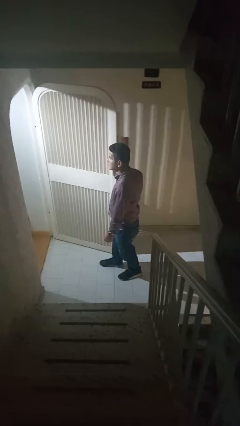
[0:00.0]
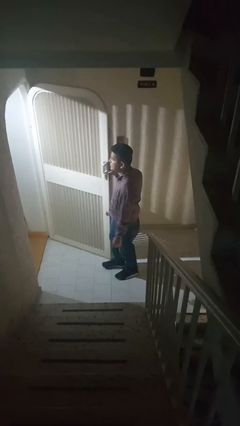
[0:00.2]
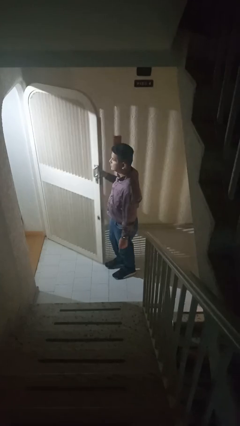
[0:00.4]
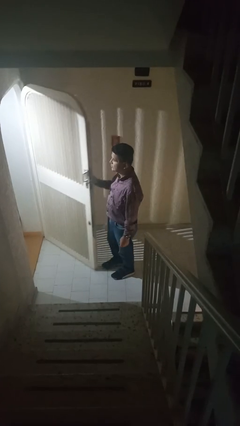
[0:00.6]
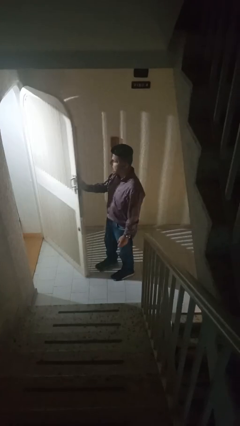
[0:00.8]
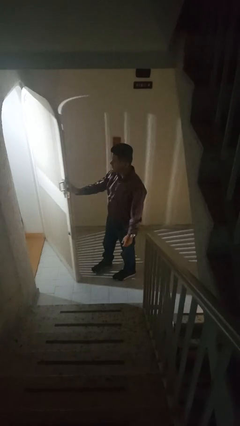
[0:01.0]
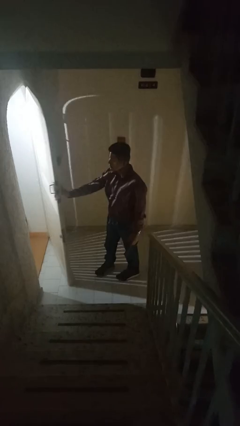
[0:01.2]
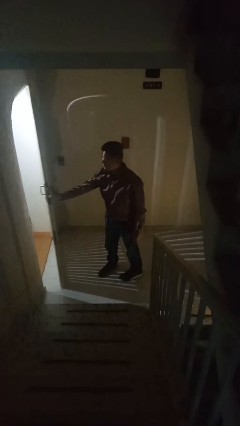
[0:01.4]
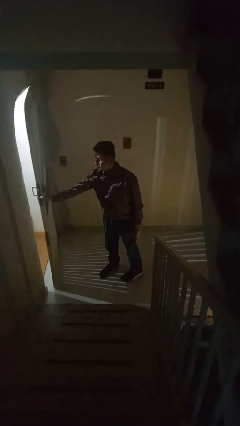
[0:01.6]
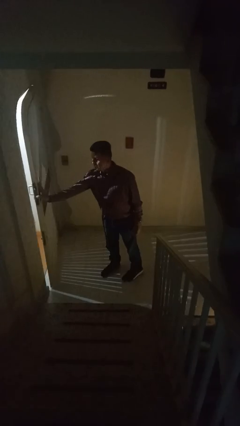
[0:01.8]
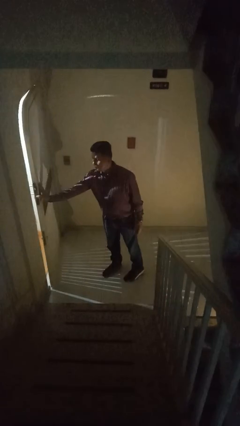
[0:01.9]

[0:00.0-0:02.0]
person closes facility door

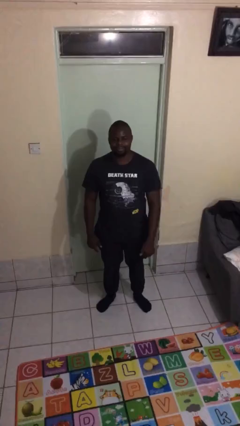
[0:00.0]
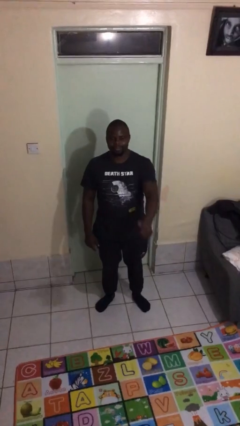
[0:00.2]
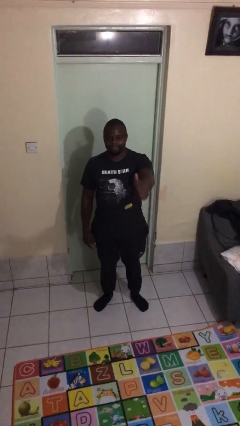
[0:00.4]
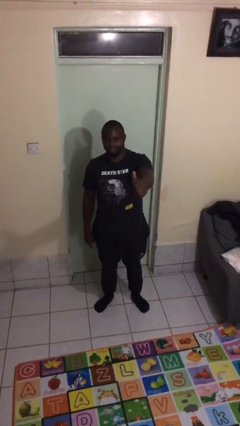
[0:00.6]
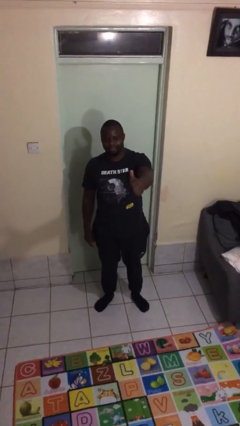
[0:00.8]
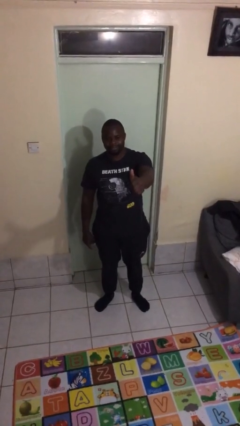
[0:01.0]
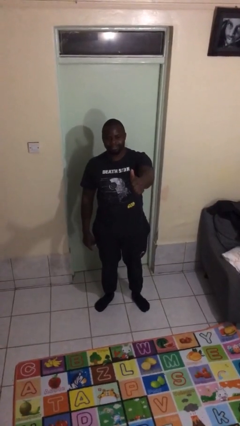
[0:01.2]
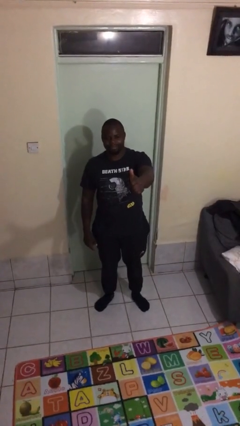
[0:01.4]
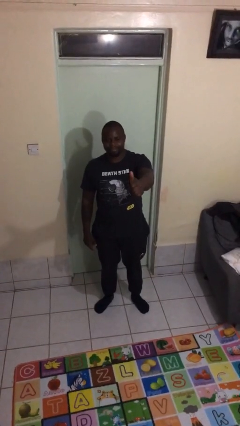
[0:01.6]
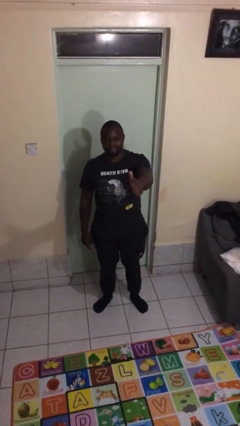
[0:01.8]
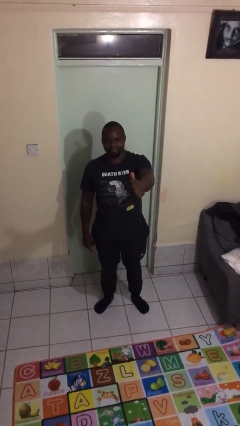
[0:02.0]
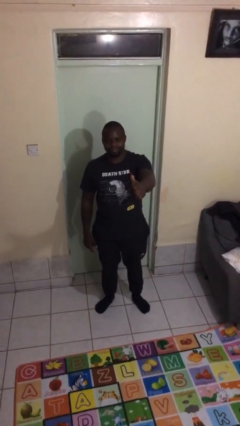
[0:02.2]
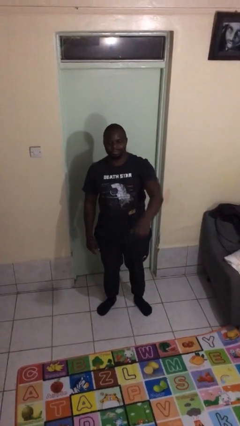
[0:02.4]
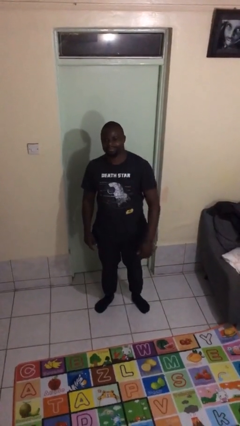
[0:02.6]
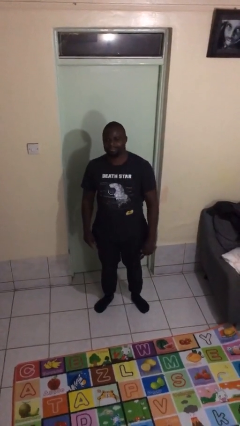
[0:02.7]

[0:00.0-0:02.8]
person gestures thumbs up

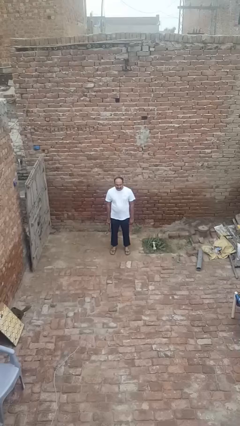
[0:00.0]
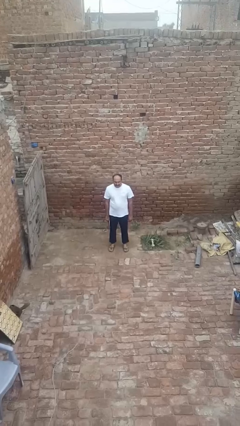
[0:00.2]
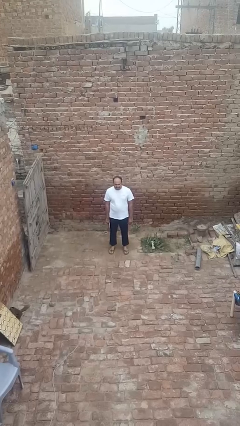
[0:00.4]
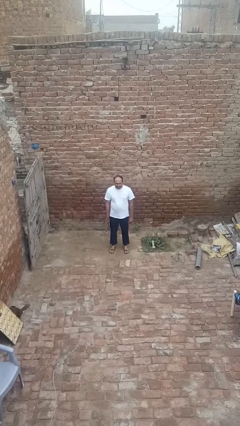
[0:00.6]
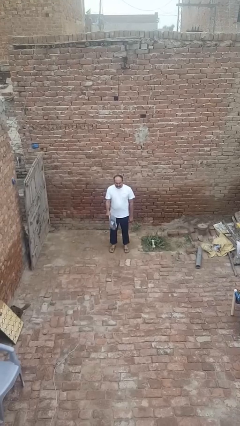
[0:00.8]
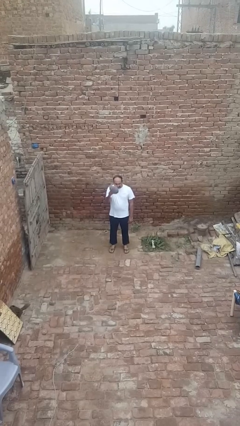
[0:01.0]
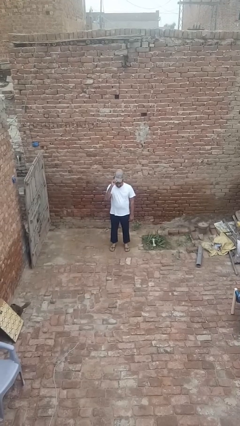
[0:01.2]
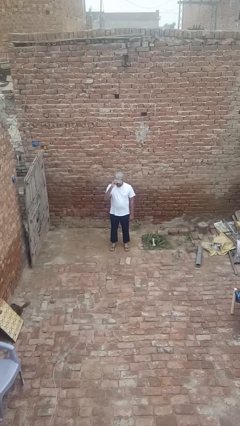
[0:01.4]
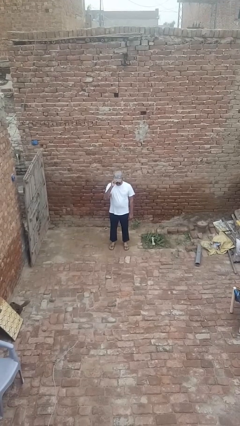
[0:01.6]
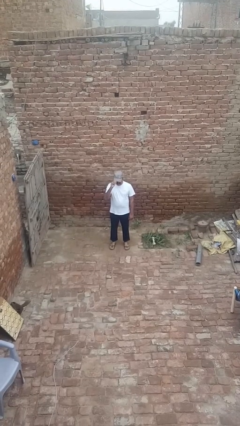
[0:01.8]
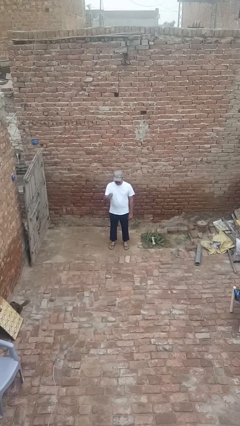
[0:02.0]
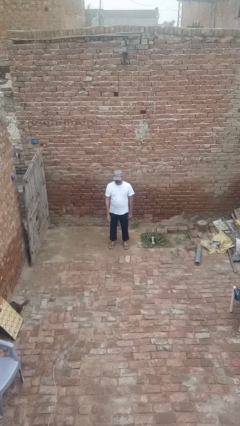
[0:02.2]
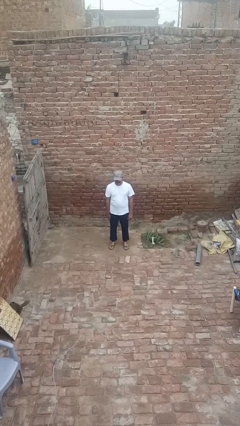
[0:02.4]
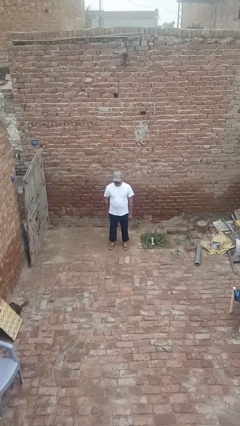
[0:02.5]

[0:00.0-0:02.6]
person puts on hat

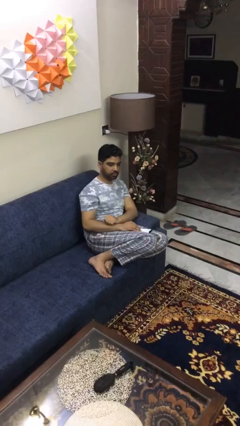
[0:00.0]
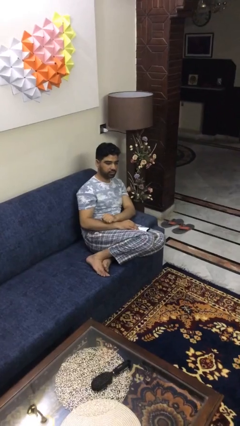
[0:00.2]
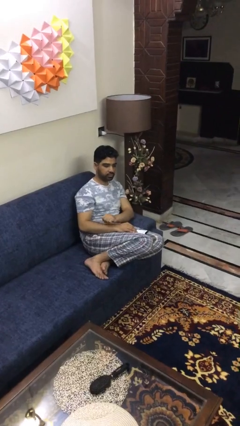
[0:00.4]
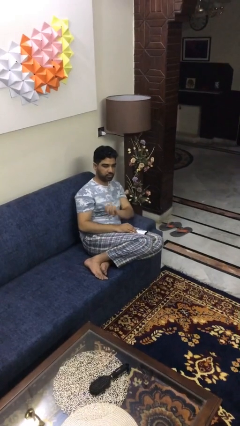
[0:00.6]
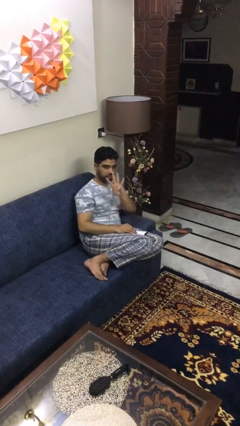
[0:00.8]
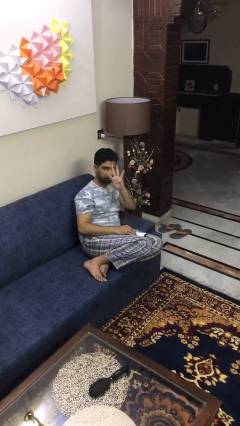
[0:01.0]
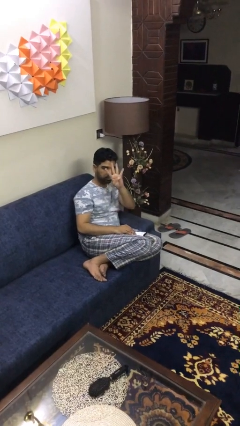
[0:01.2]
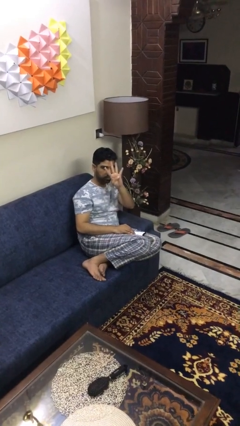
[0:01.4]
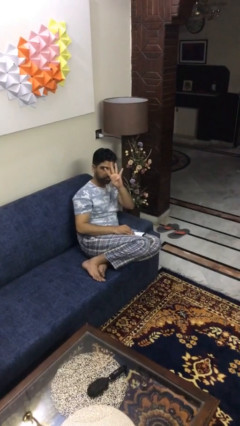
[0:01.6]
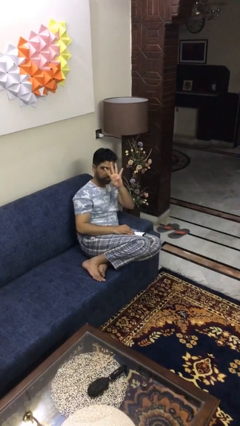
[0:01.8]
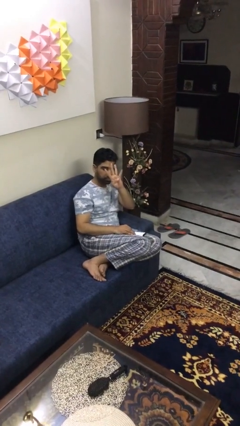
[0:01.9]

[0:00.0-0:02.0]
person gestures number four

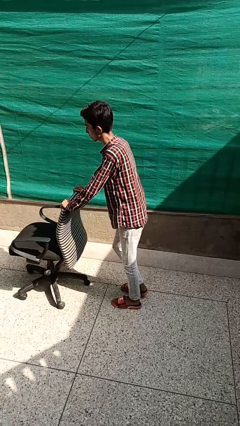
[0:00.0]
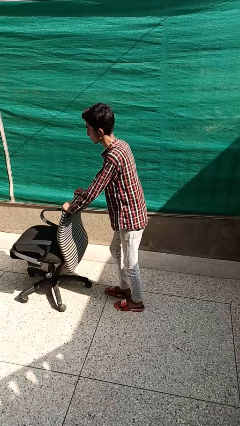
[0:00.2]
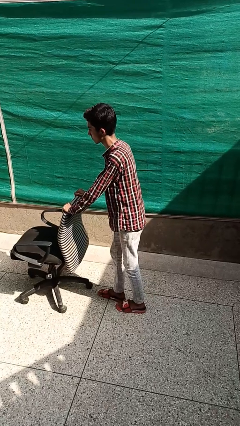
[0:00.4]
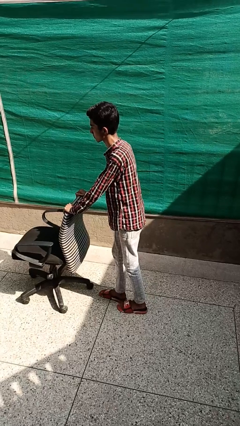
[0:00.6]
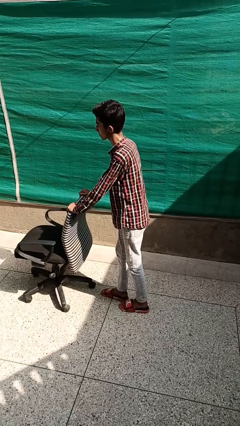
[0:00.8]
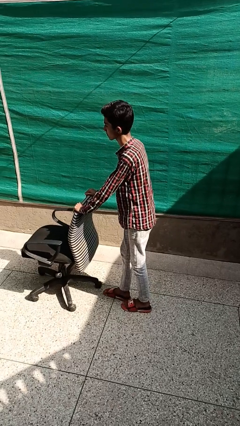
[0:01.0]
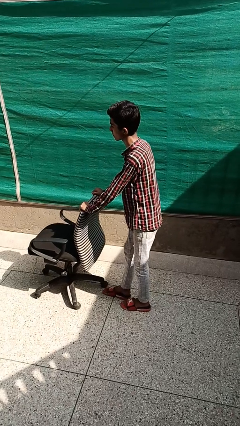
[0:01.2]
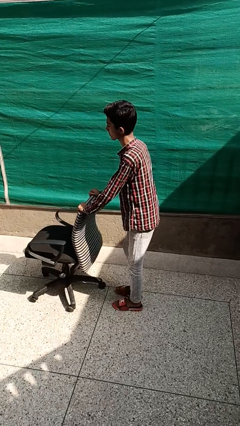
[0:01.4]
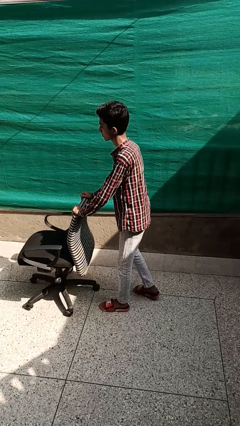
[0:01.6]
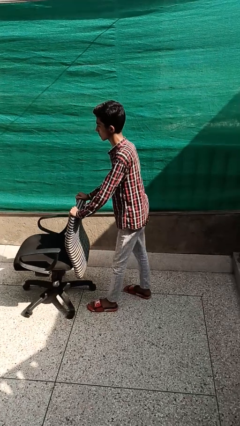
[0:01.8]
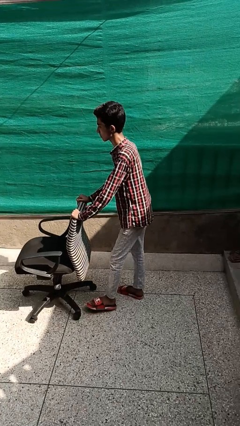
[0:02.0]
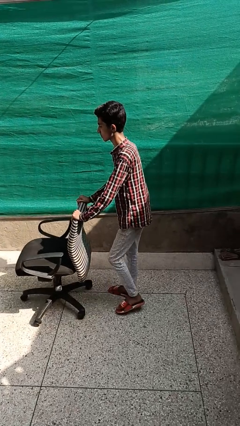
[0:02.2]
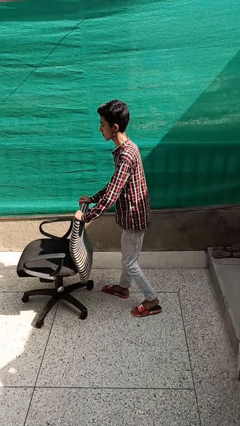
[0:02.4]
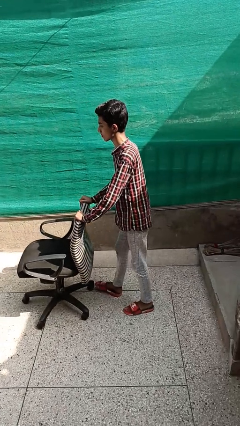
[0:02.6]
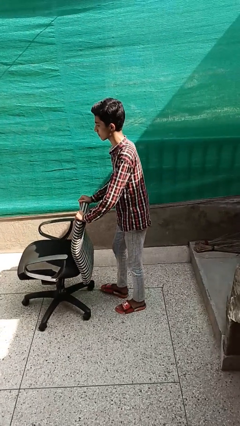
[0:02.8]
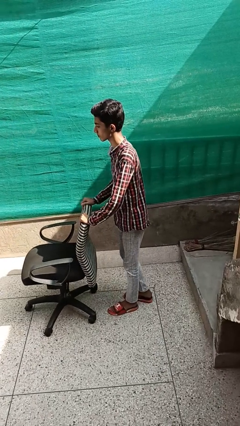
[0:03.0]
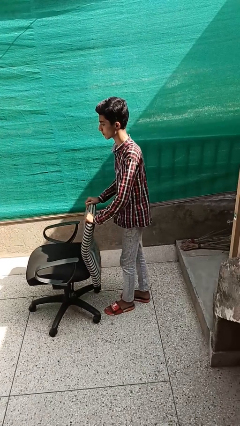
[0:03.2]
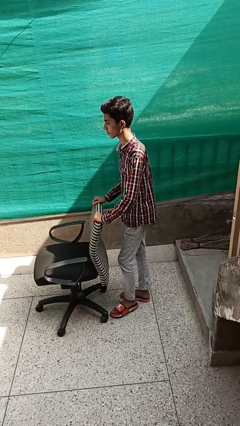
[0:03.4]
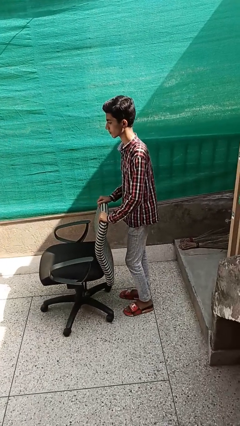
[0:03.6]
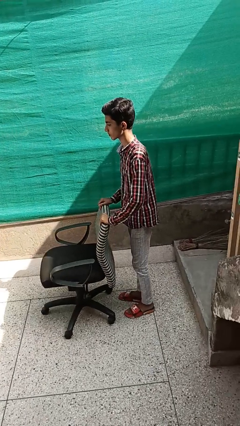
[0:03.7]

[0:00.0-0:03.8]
person pulls wheeled cart

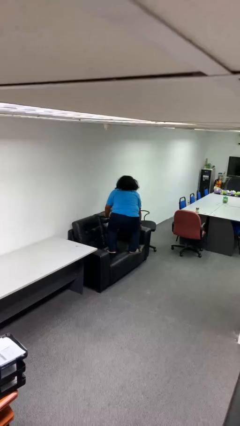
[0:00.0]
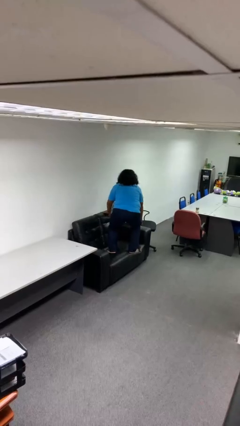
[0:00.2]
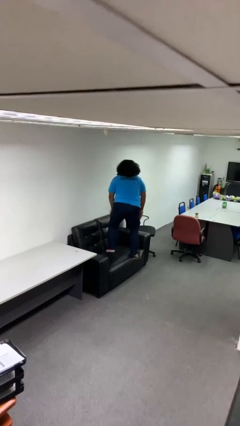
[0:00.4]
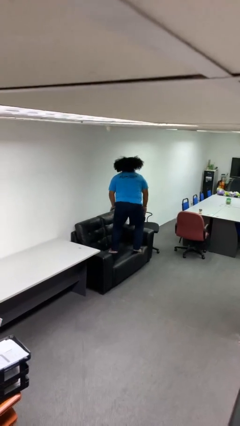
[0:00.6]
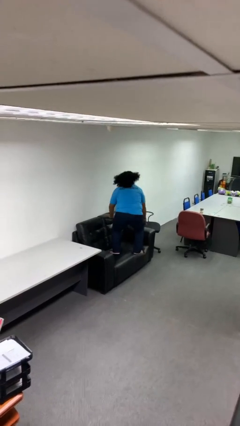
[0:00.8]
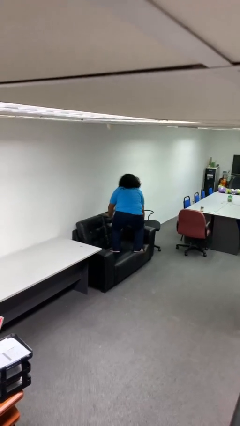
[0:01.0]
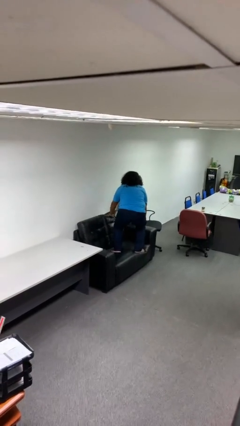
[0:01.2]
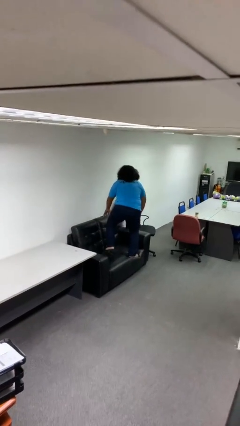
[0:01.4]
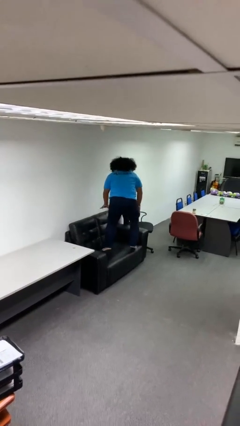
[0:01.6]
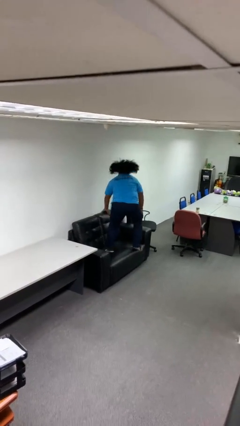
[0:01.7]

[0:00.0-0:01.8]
person jumps on couch

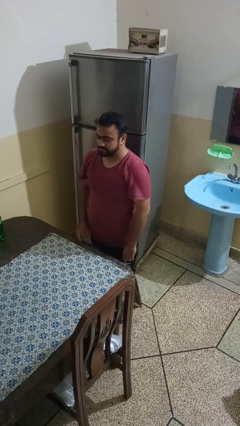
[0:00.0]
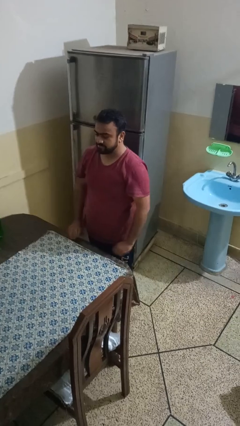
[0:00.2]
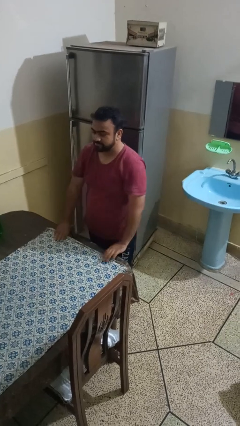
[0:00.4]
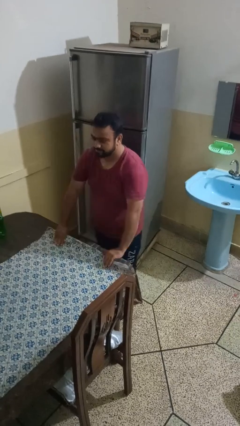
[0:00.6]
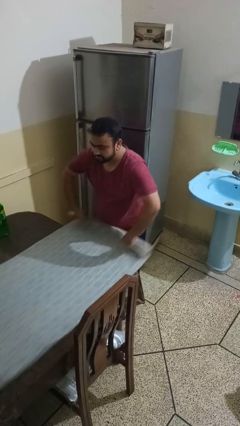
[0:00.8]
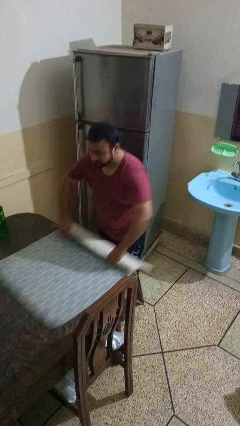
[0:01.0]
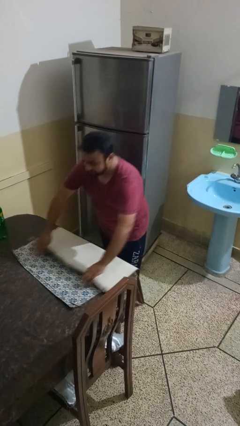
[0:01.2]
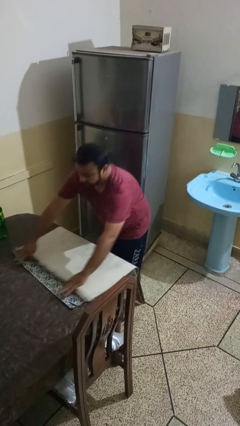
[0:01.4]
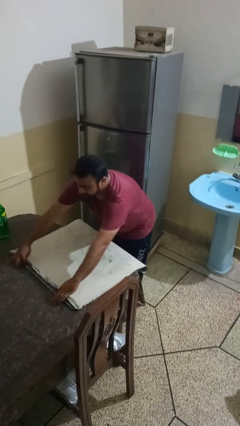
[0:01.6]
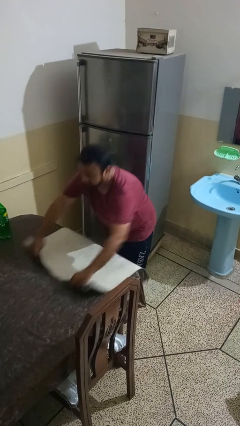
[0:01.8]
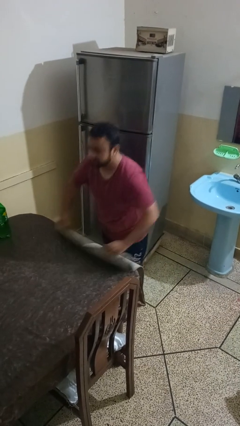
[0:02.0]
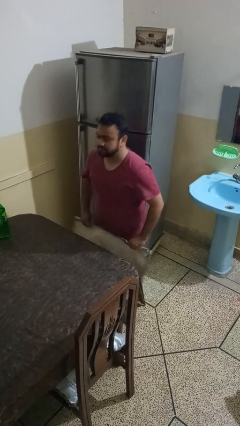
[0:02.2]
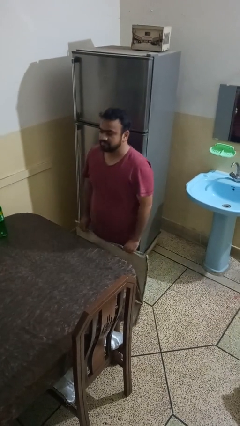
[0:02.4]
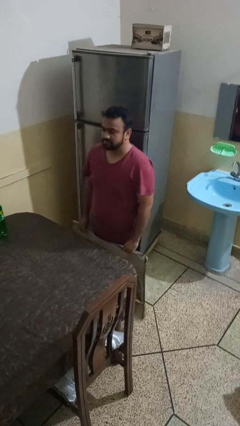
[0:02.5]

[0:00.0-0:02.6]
person folds tablecloth
